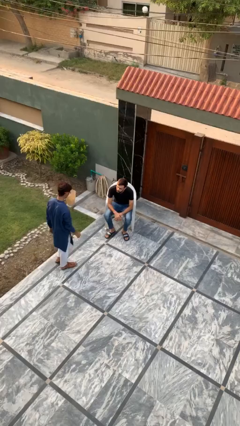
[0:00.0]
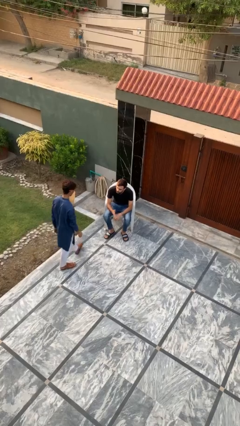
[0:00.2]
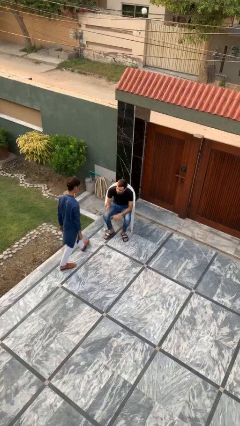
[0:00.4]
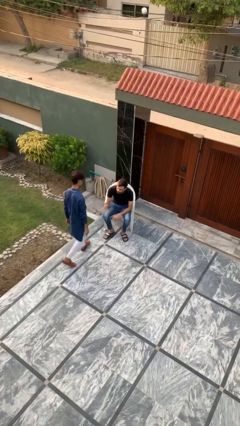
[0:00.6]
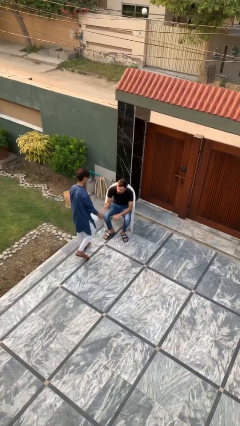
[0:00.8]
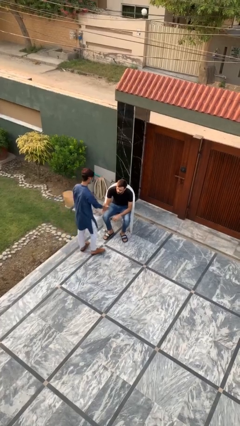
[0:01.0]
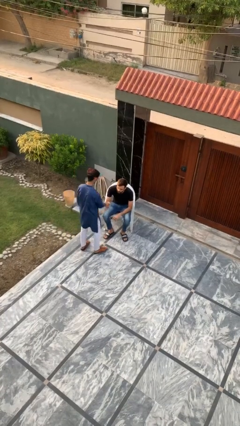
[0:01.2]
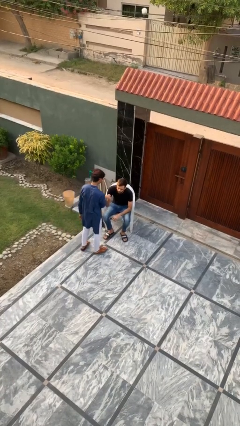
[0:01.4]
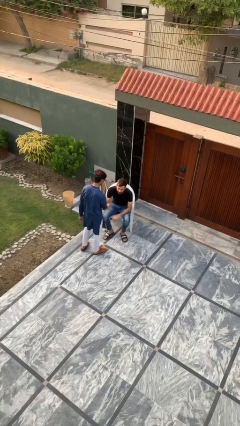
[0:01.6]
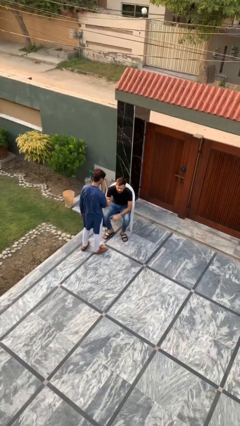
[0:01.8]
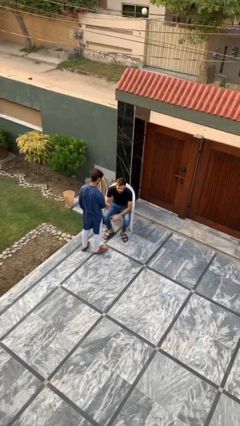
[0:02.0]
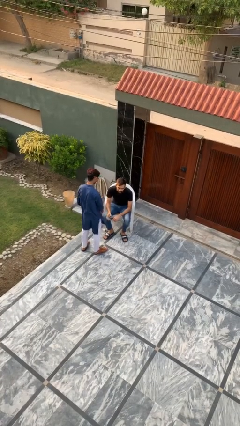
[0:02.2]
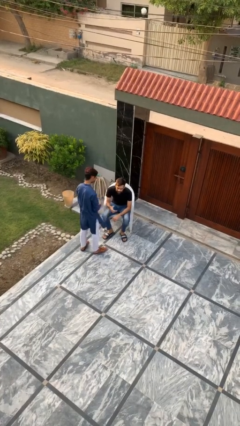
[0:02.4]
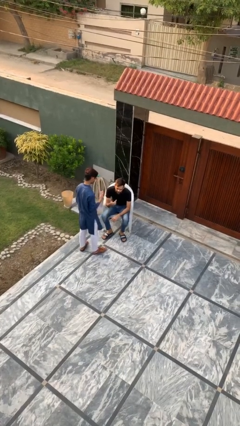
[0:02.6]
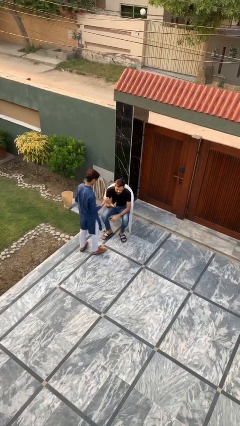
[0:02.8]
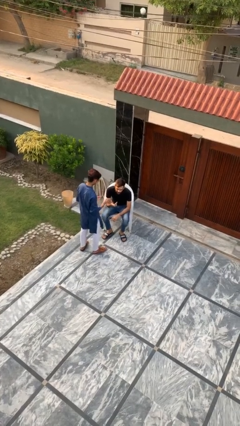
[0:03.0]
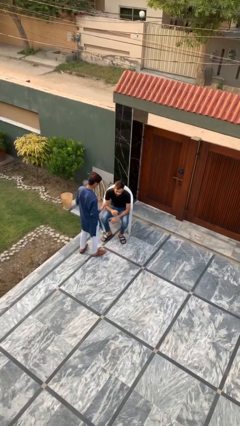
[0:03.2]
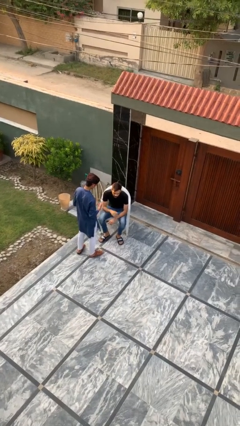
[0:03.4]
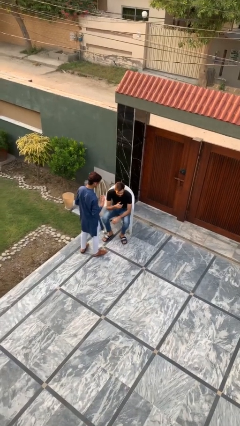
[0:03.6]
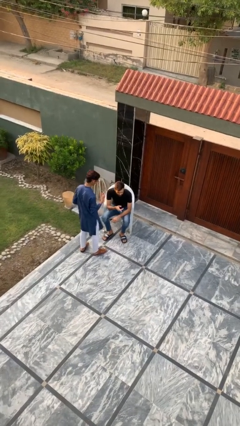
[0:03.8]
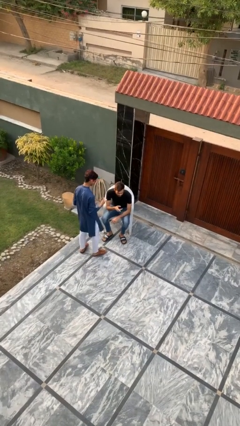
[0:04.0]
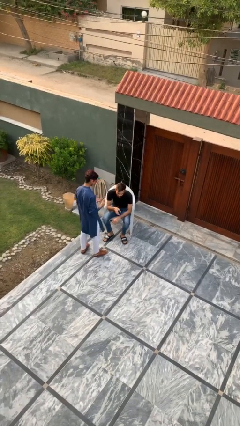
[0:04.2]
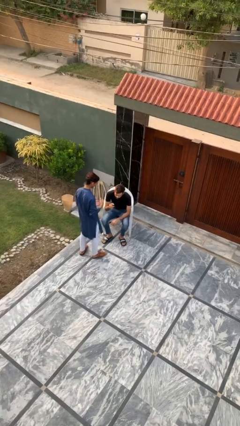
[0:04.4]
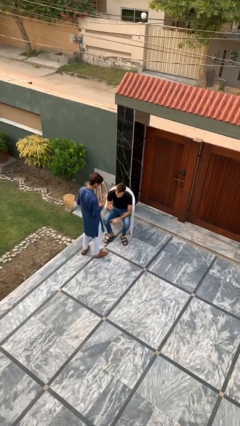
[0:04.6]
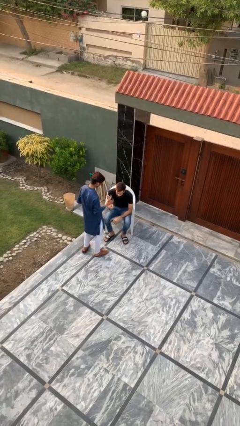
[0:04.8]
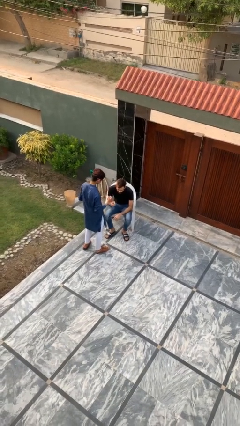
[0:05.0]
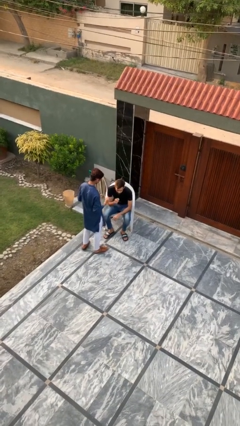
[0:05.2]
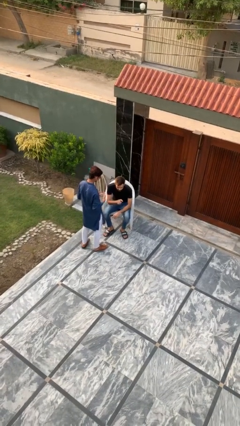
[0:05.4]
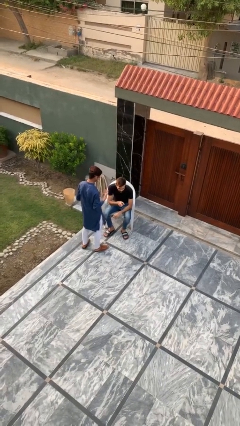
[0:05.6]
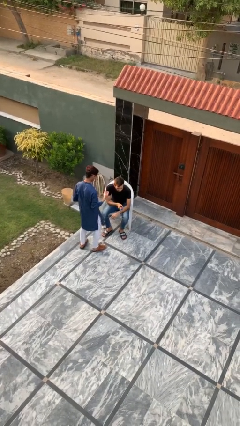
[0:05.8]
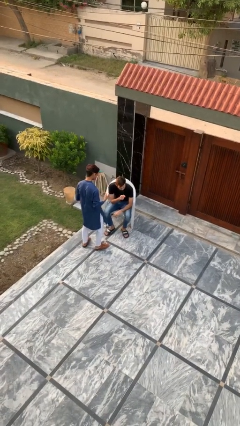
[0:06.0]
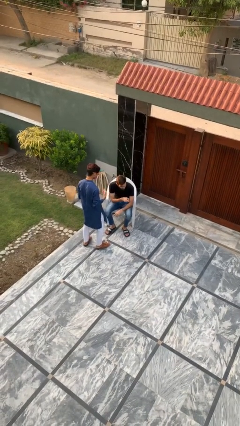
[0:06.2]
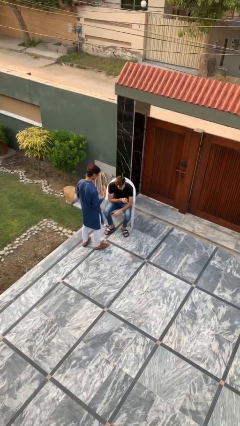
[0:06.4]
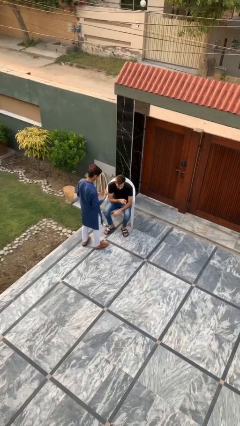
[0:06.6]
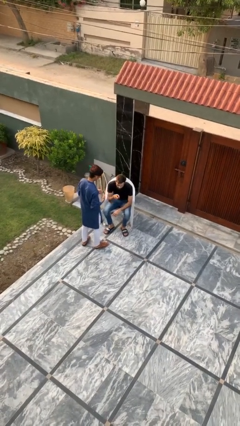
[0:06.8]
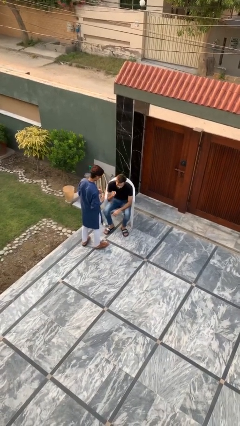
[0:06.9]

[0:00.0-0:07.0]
person shakes hand

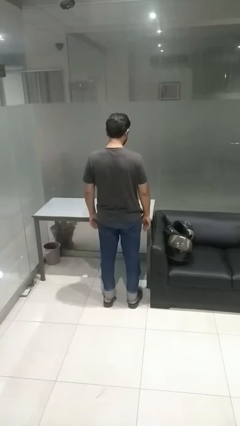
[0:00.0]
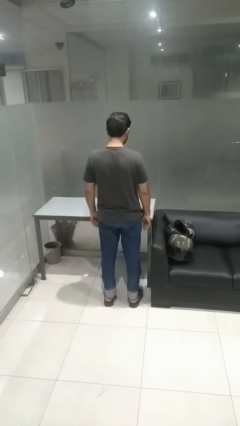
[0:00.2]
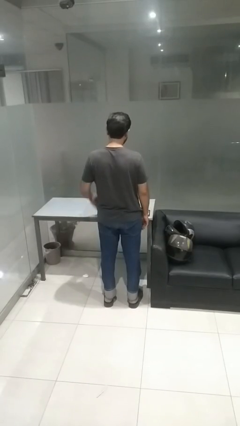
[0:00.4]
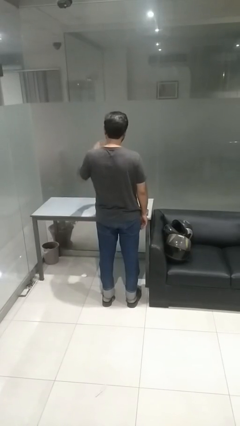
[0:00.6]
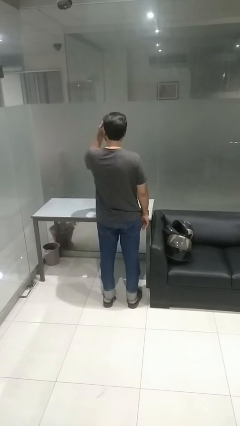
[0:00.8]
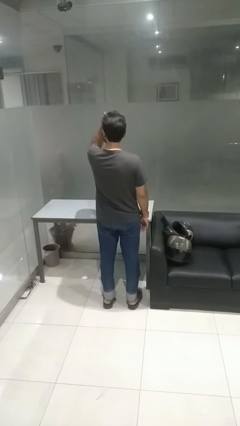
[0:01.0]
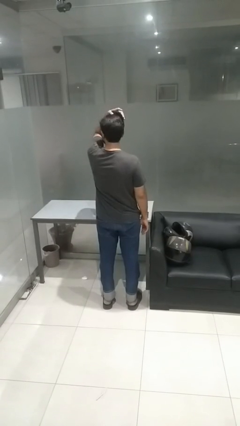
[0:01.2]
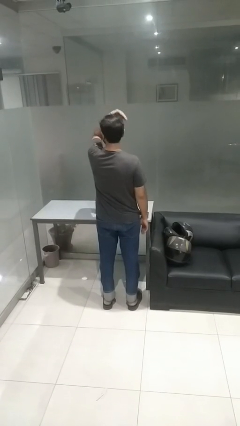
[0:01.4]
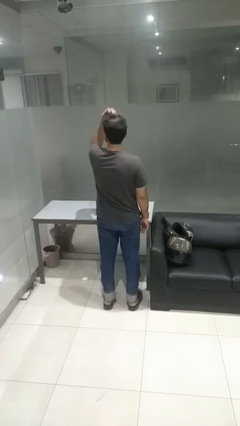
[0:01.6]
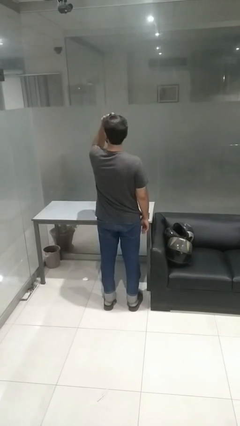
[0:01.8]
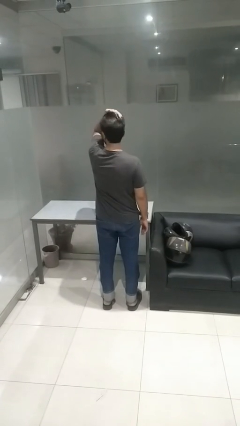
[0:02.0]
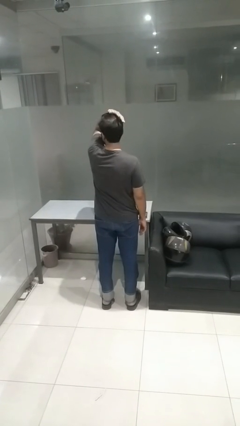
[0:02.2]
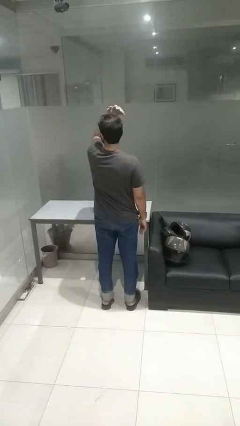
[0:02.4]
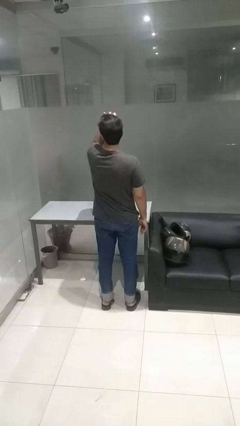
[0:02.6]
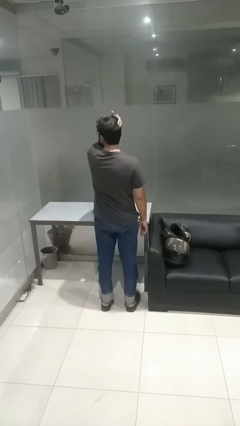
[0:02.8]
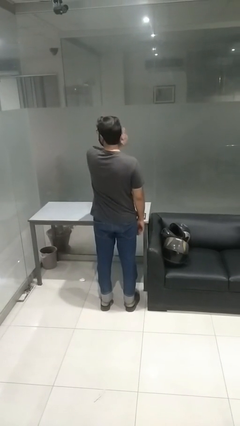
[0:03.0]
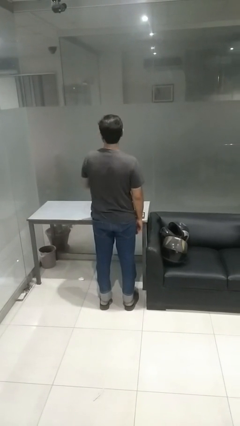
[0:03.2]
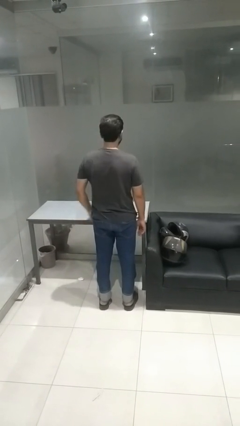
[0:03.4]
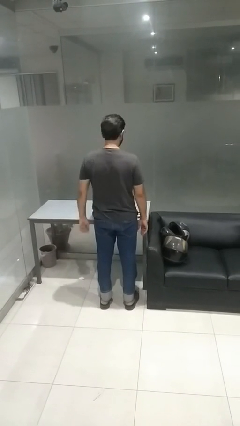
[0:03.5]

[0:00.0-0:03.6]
person strokes hair

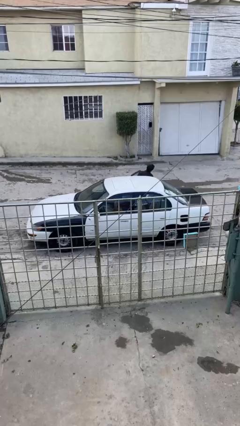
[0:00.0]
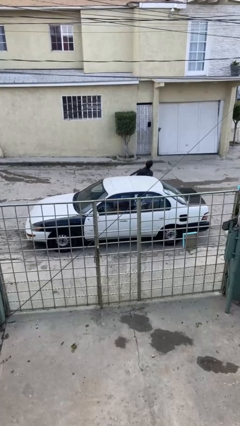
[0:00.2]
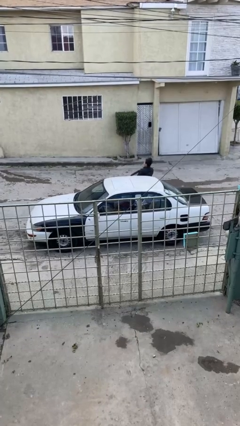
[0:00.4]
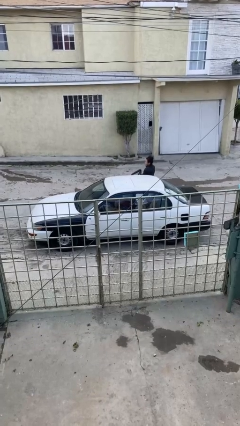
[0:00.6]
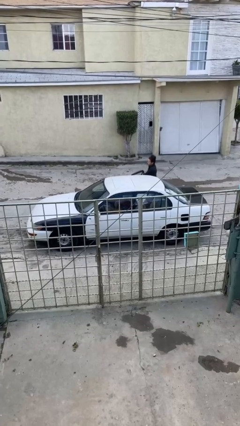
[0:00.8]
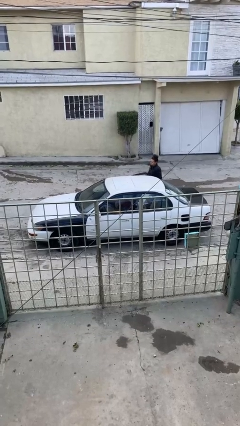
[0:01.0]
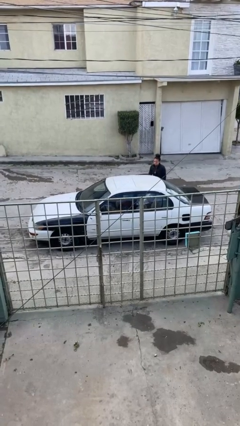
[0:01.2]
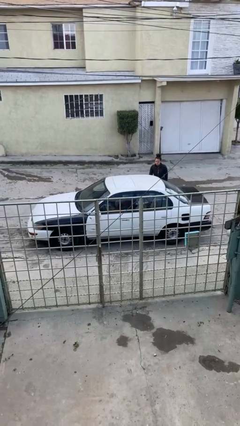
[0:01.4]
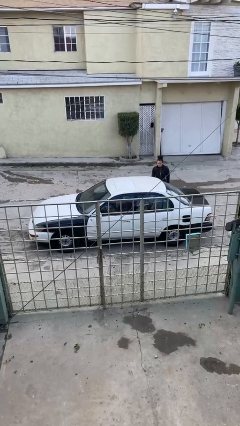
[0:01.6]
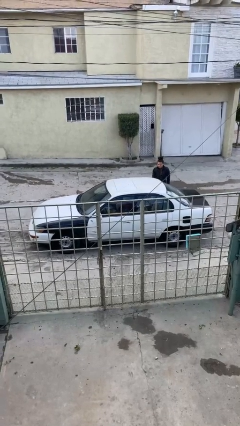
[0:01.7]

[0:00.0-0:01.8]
car drops off person

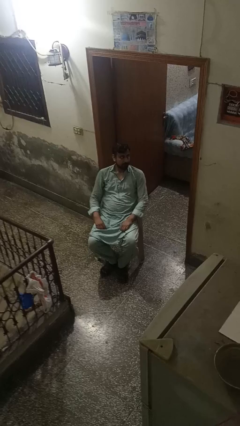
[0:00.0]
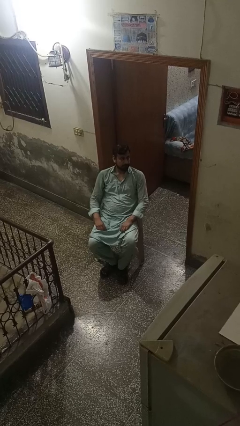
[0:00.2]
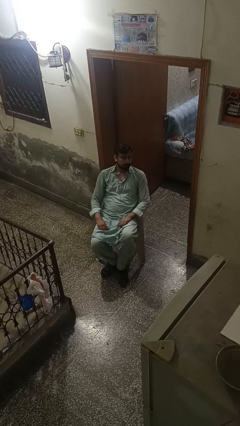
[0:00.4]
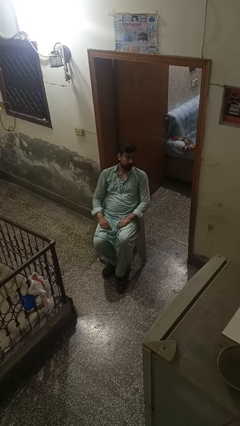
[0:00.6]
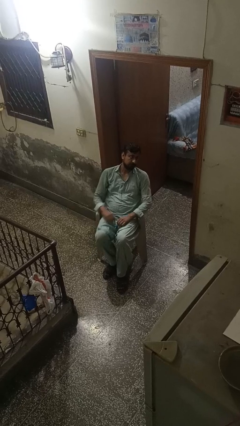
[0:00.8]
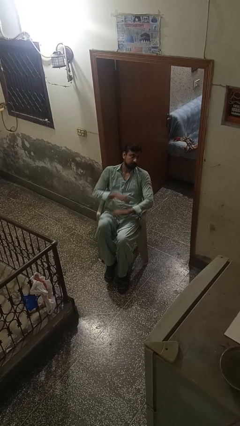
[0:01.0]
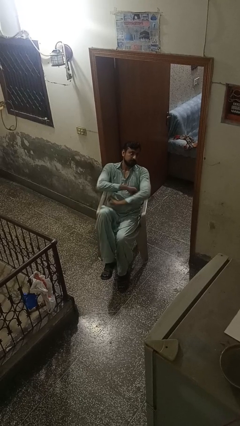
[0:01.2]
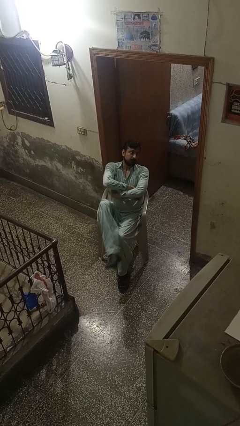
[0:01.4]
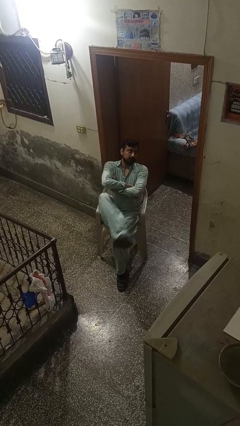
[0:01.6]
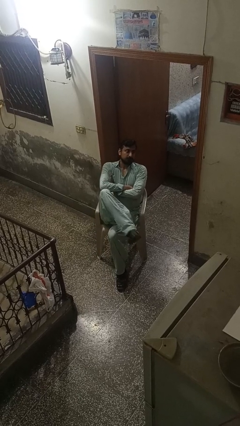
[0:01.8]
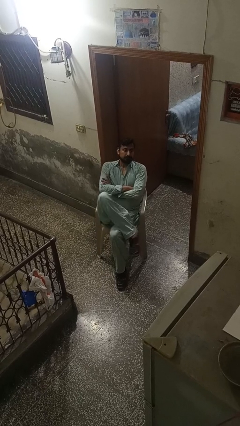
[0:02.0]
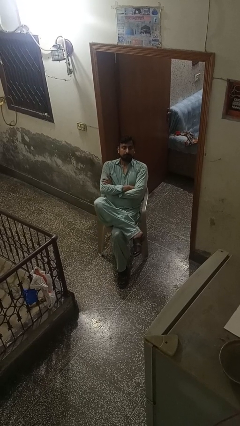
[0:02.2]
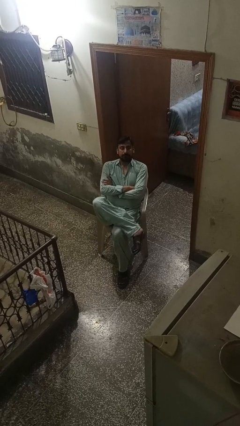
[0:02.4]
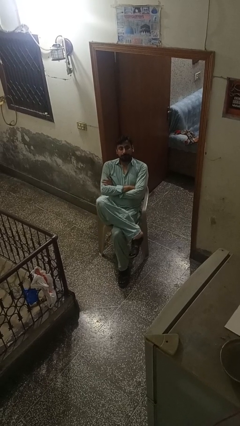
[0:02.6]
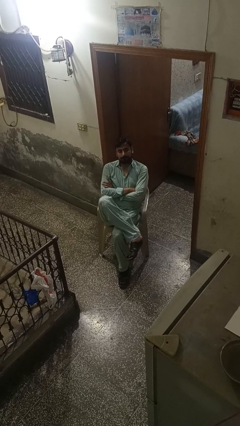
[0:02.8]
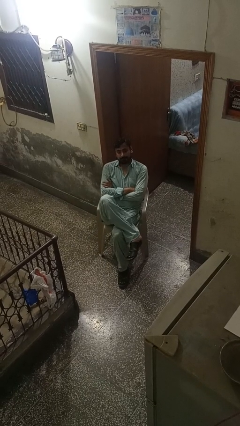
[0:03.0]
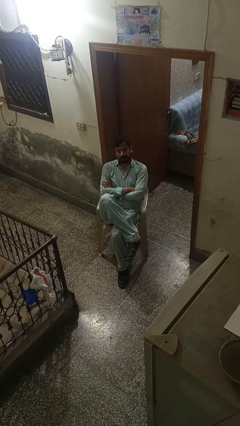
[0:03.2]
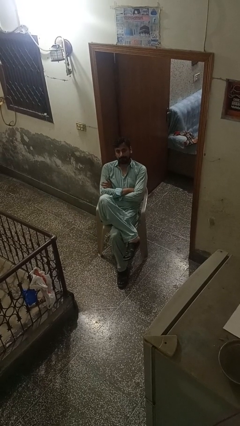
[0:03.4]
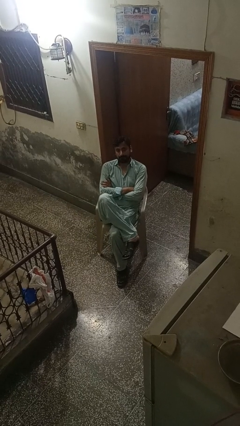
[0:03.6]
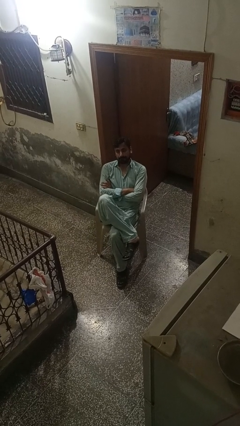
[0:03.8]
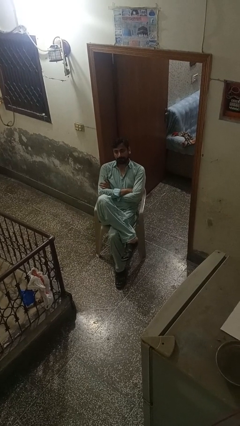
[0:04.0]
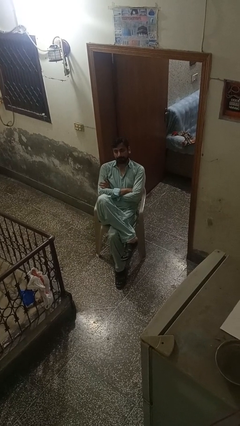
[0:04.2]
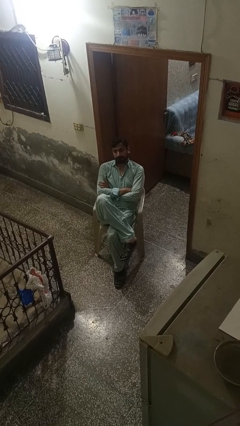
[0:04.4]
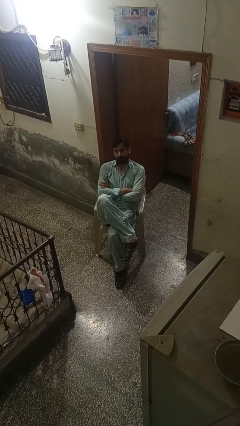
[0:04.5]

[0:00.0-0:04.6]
person crosses arms

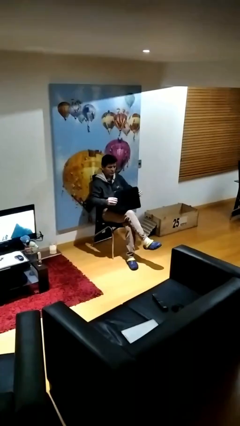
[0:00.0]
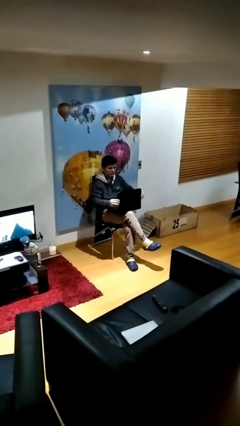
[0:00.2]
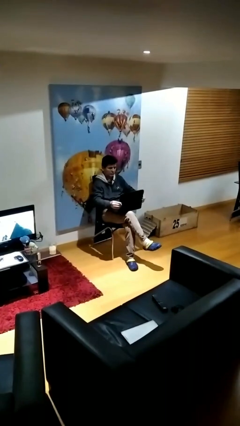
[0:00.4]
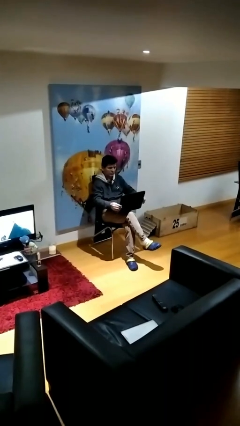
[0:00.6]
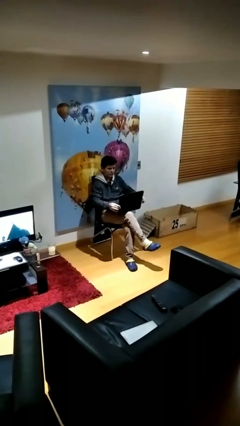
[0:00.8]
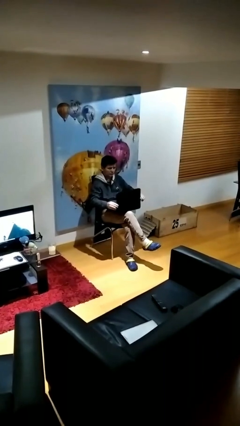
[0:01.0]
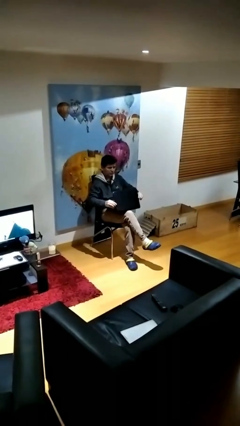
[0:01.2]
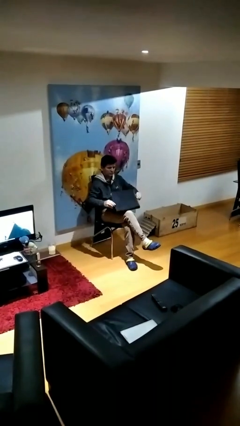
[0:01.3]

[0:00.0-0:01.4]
person interacts with laptop
